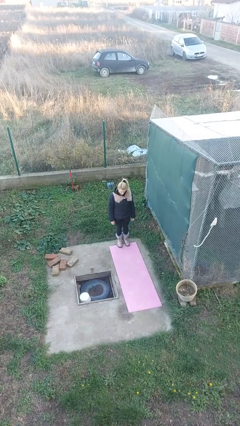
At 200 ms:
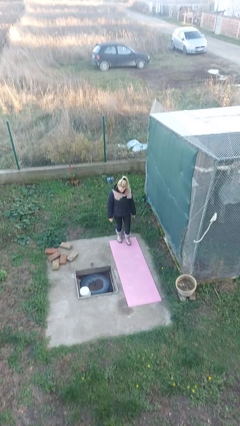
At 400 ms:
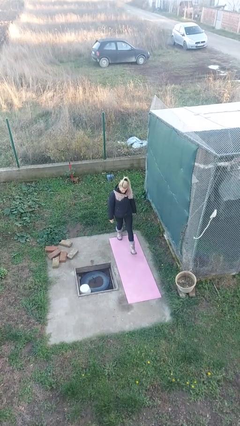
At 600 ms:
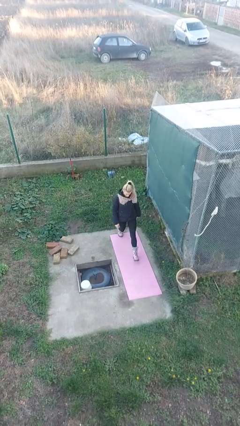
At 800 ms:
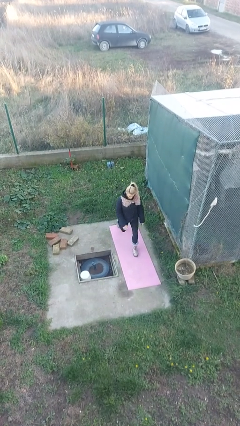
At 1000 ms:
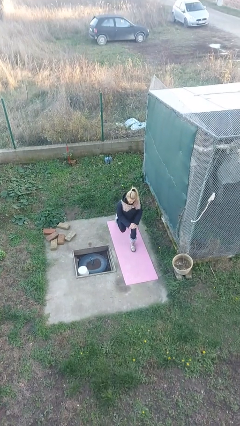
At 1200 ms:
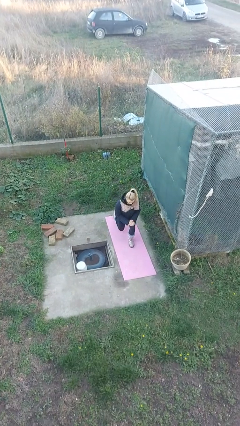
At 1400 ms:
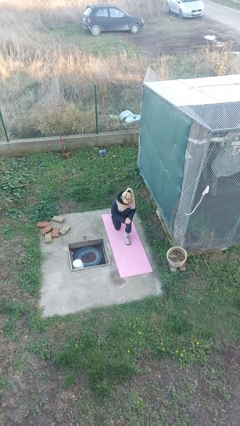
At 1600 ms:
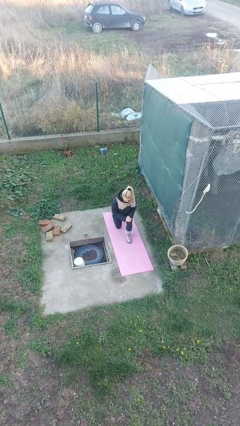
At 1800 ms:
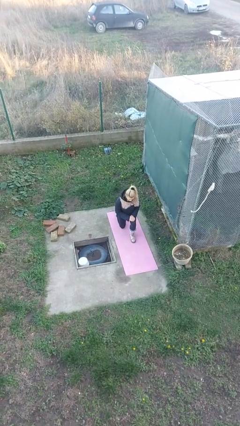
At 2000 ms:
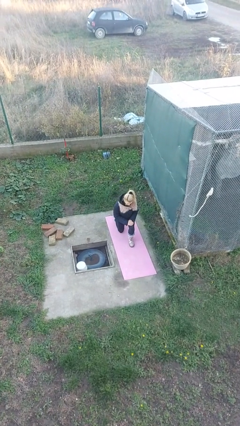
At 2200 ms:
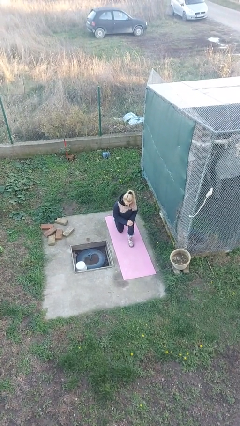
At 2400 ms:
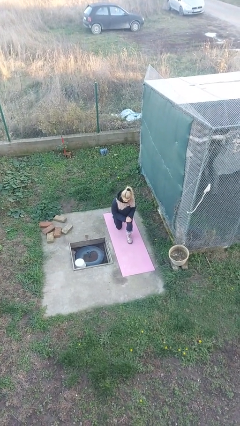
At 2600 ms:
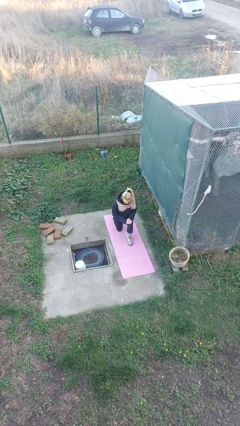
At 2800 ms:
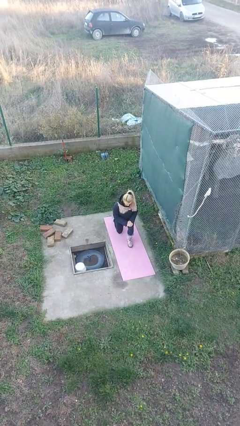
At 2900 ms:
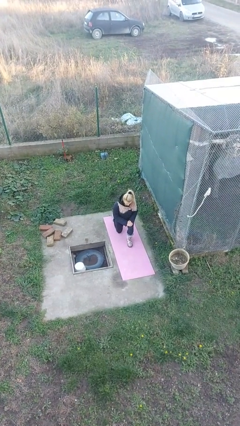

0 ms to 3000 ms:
person kneels

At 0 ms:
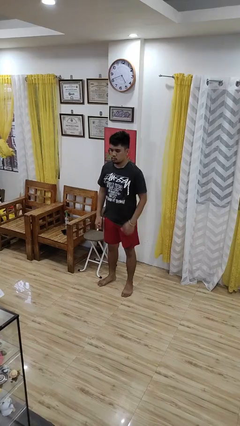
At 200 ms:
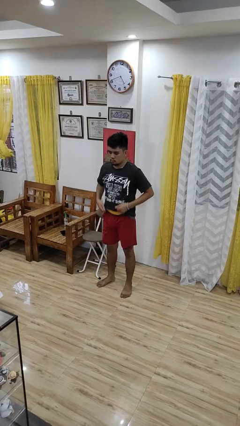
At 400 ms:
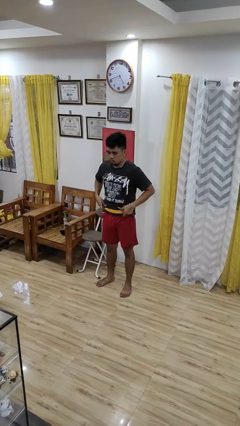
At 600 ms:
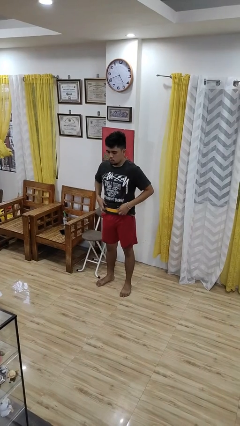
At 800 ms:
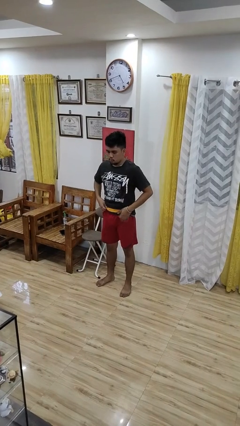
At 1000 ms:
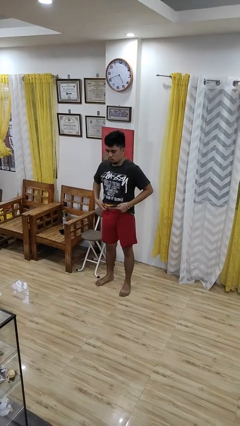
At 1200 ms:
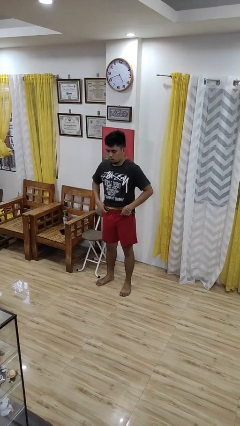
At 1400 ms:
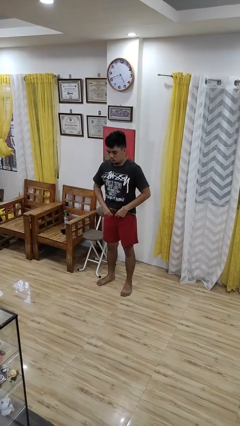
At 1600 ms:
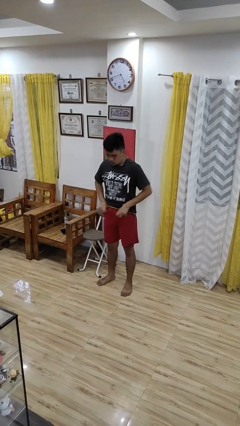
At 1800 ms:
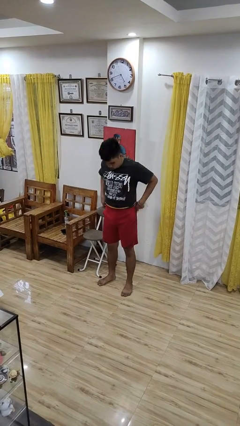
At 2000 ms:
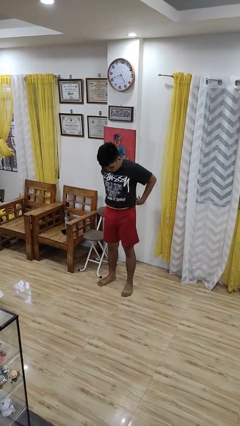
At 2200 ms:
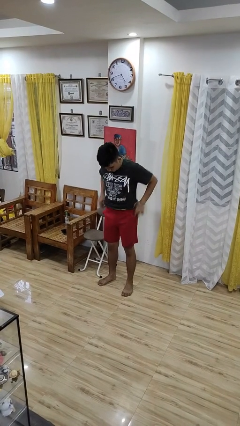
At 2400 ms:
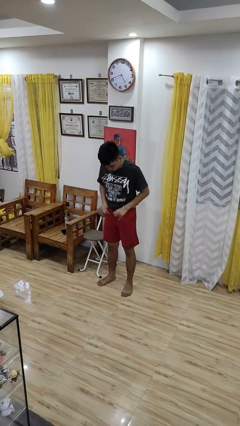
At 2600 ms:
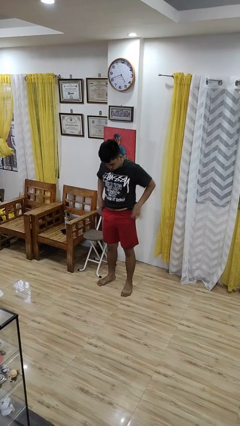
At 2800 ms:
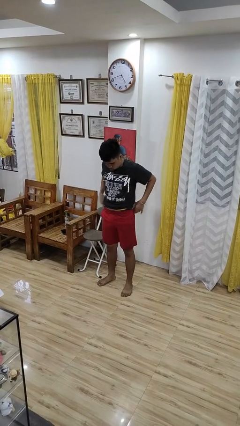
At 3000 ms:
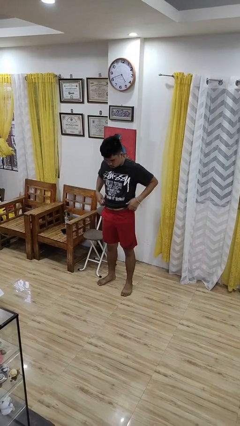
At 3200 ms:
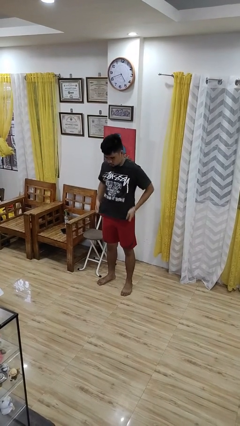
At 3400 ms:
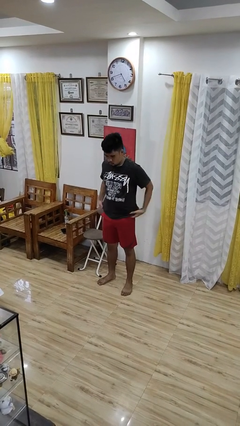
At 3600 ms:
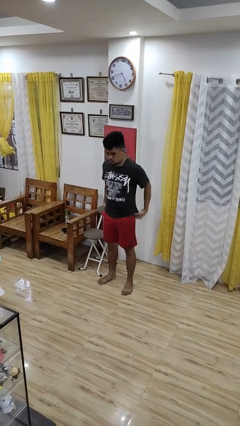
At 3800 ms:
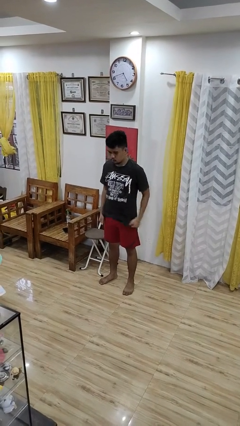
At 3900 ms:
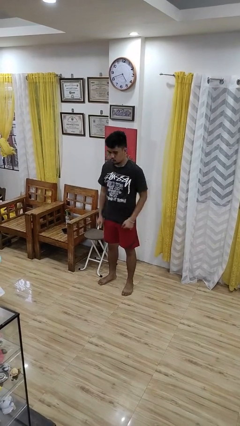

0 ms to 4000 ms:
person hikes up pants

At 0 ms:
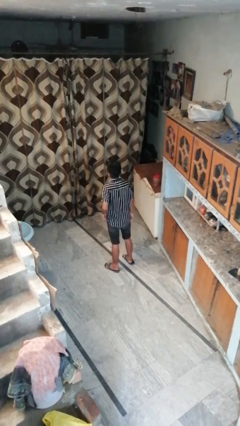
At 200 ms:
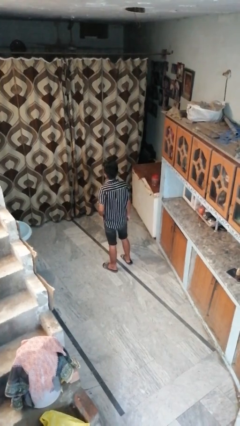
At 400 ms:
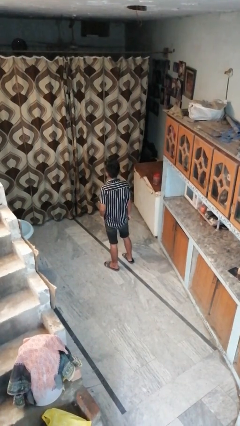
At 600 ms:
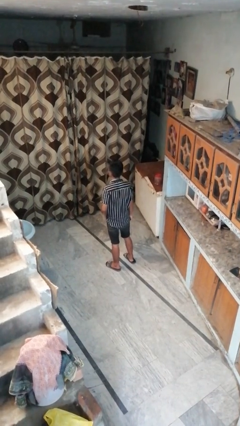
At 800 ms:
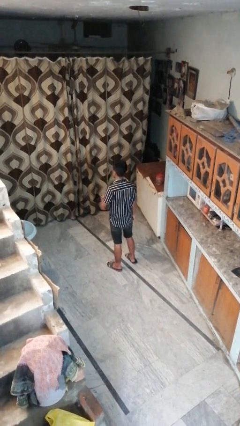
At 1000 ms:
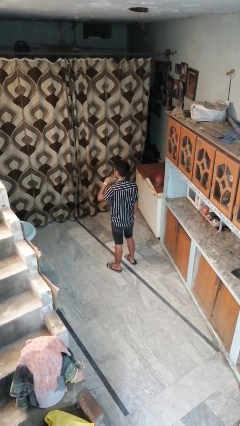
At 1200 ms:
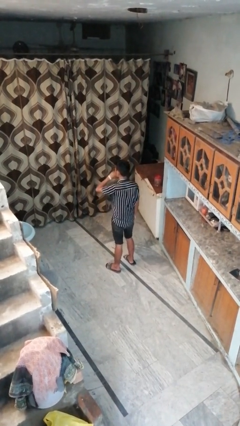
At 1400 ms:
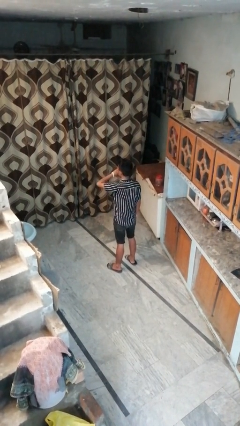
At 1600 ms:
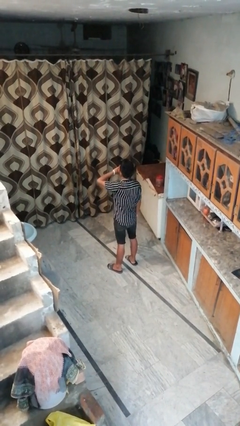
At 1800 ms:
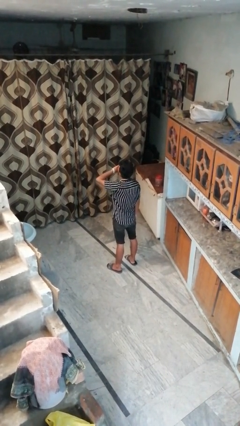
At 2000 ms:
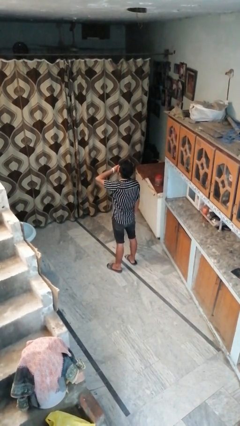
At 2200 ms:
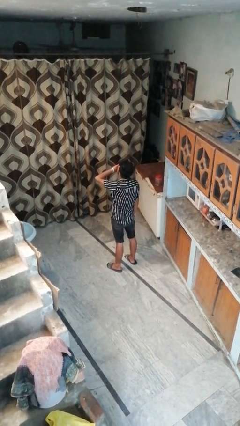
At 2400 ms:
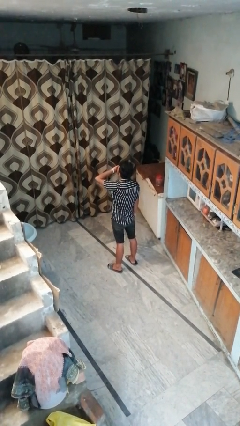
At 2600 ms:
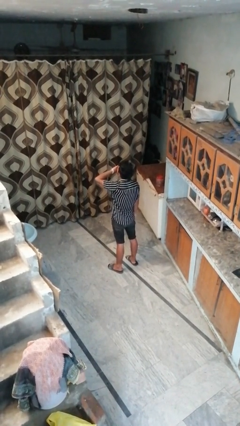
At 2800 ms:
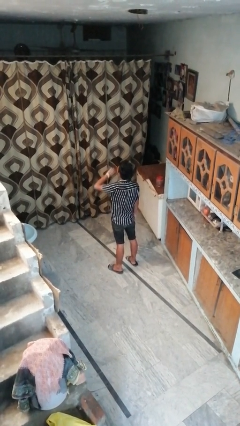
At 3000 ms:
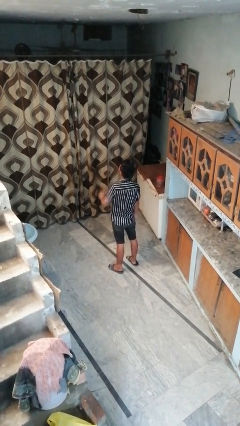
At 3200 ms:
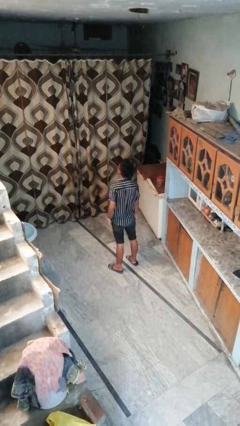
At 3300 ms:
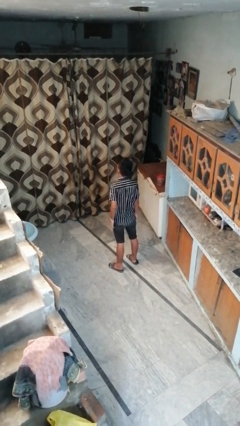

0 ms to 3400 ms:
person yawns

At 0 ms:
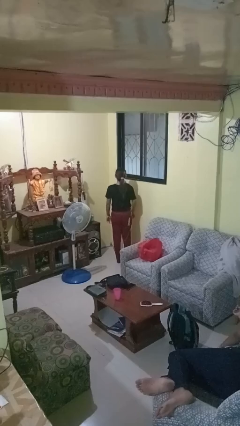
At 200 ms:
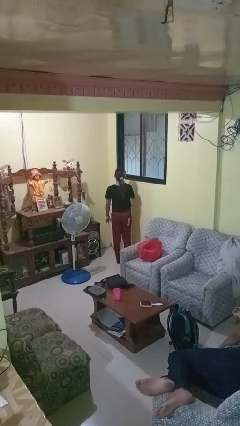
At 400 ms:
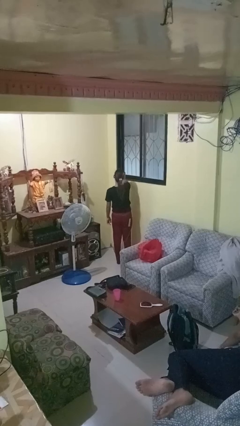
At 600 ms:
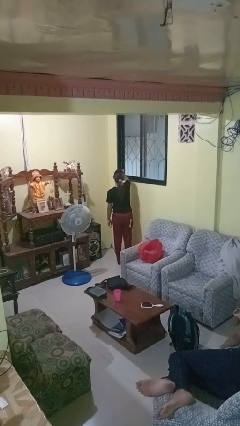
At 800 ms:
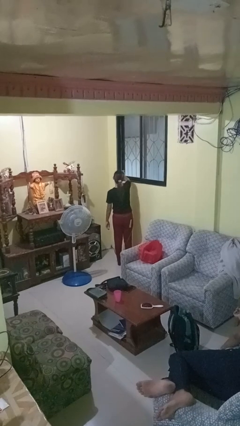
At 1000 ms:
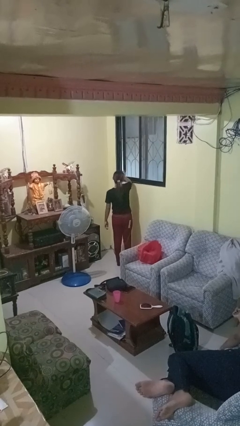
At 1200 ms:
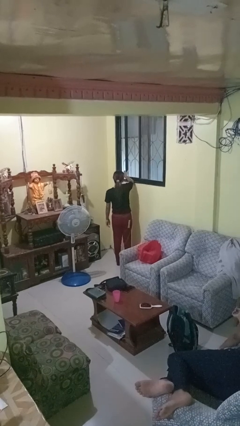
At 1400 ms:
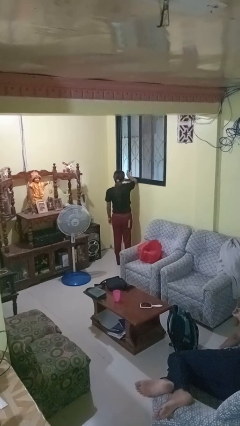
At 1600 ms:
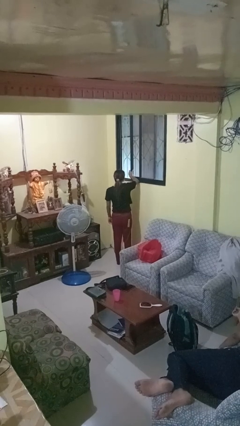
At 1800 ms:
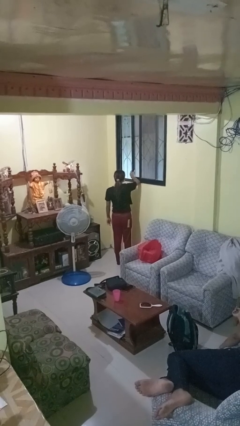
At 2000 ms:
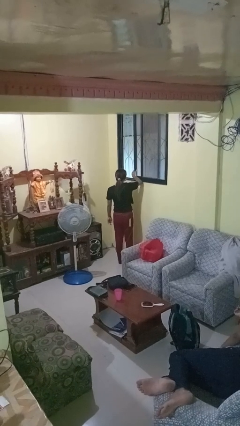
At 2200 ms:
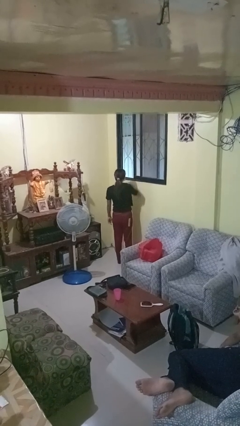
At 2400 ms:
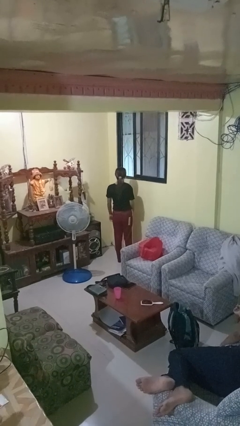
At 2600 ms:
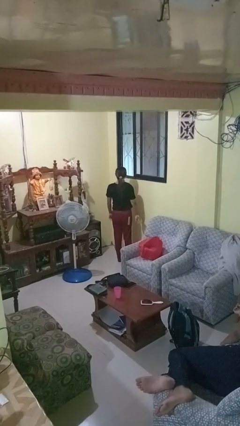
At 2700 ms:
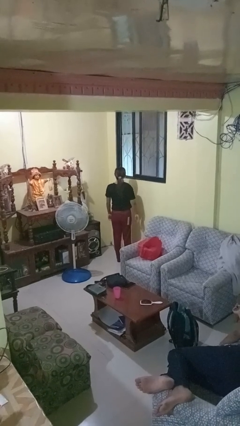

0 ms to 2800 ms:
person opens home window

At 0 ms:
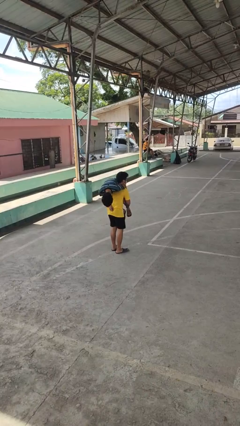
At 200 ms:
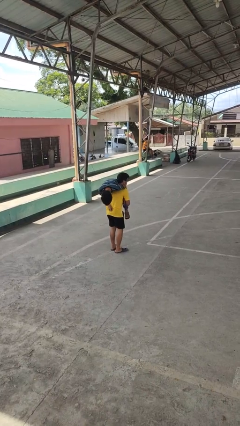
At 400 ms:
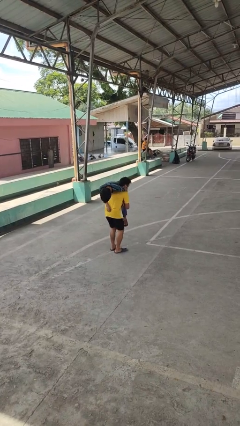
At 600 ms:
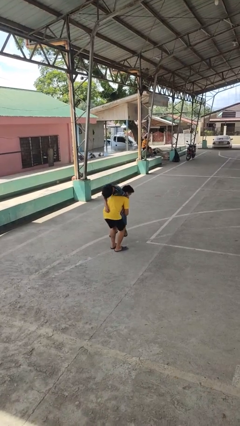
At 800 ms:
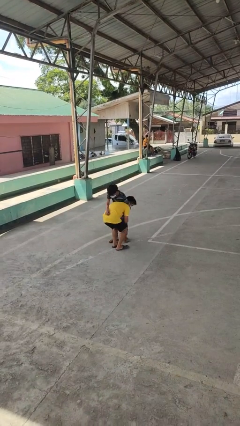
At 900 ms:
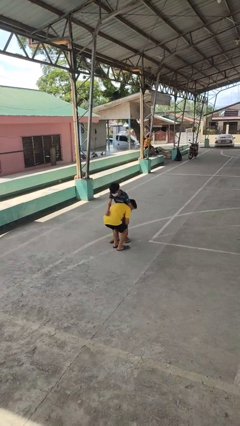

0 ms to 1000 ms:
person puts down person

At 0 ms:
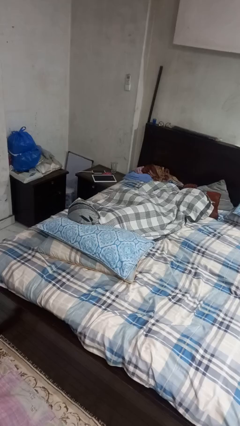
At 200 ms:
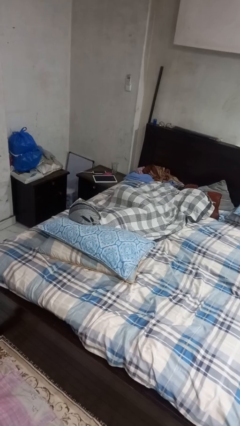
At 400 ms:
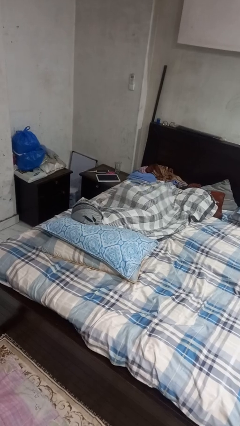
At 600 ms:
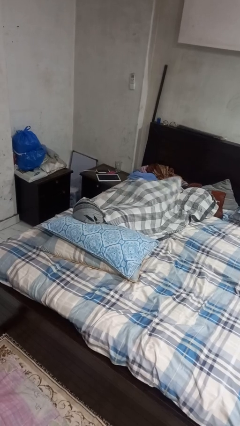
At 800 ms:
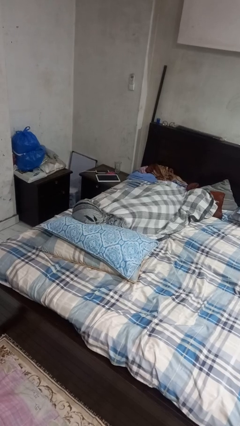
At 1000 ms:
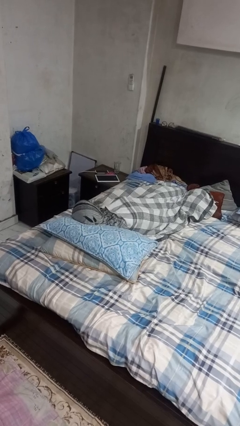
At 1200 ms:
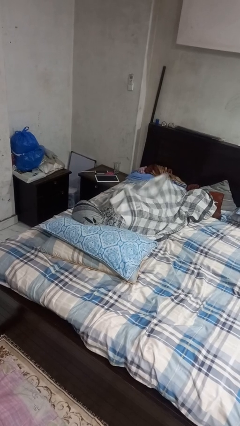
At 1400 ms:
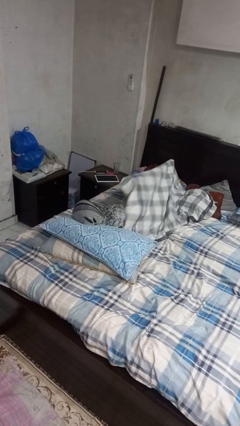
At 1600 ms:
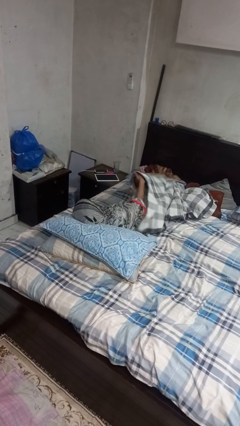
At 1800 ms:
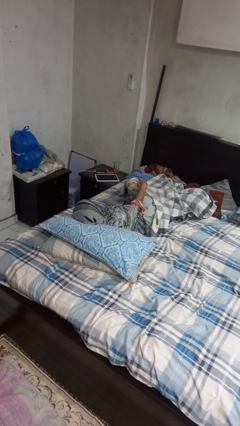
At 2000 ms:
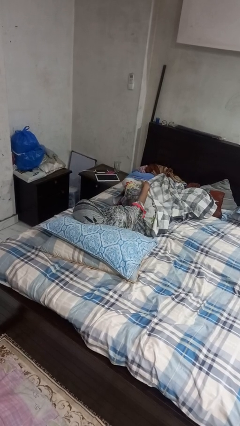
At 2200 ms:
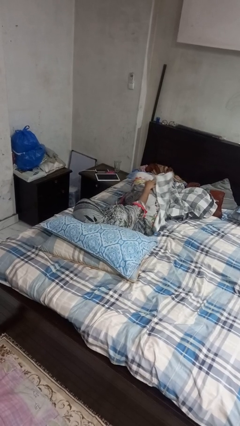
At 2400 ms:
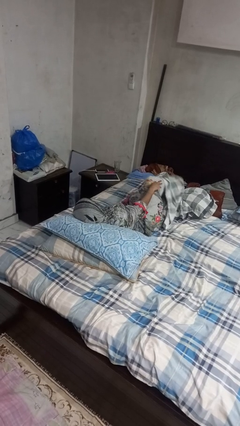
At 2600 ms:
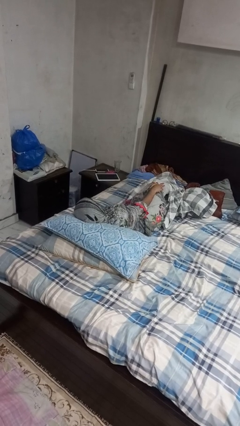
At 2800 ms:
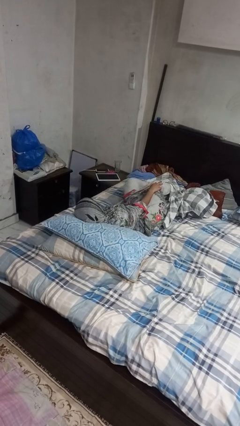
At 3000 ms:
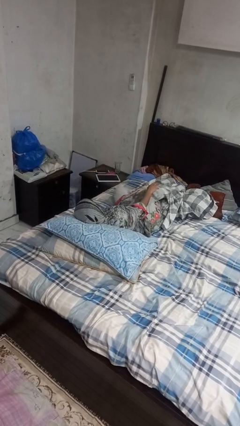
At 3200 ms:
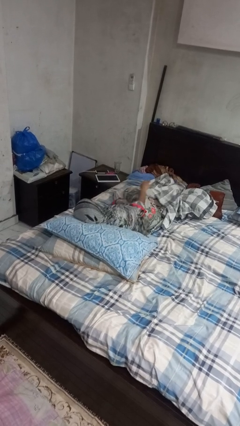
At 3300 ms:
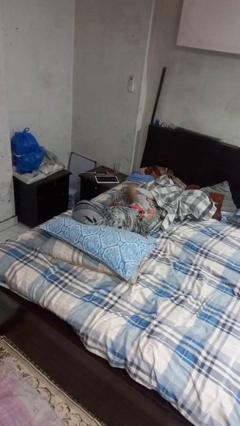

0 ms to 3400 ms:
person uncovers with bedsheets
